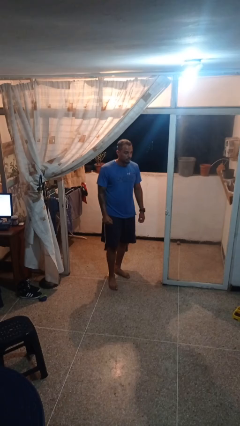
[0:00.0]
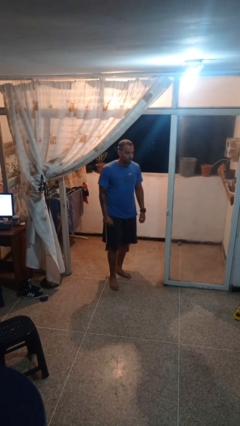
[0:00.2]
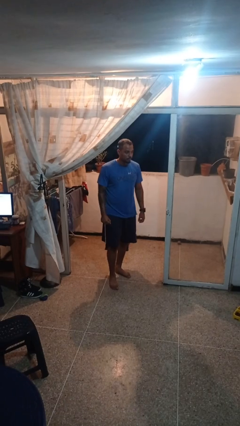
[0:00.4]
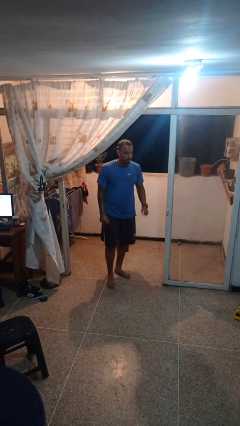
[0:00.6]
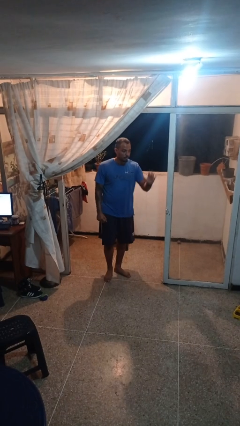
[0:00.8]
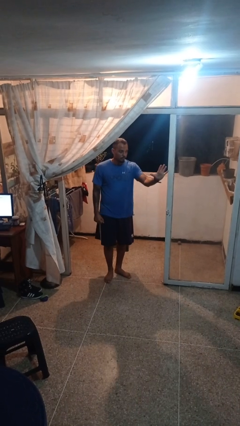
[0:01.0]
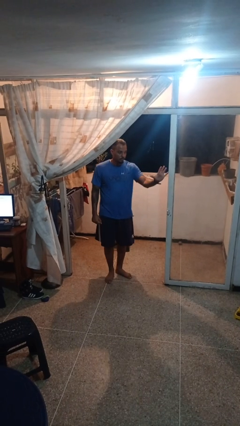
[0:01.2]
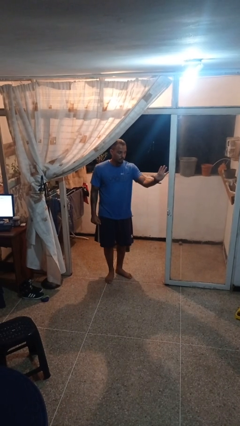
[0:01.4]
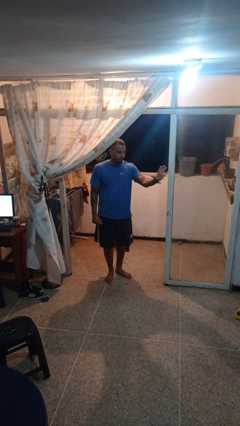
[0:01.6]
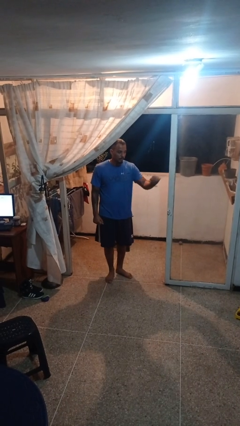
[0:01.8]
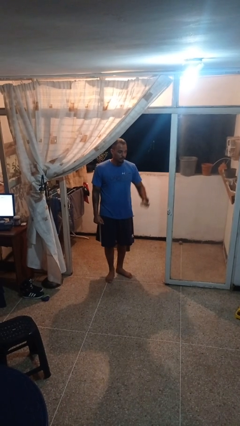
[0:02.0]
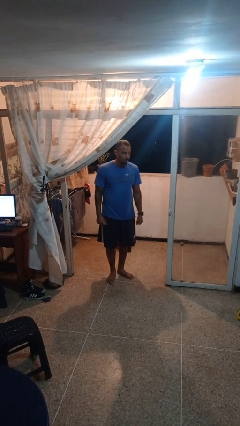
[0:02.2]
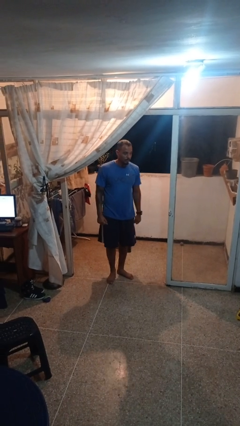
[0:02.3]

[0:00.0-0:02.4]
person gestures number five

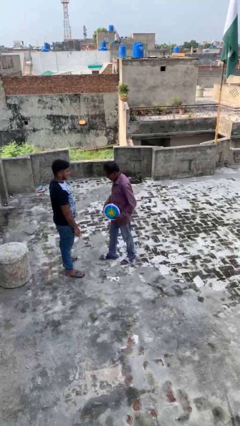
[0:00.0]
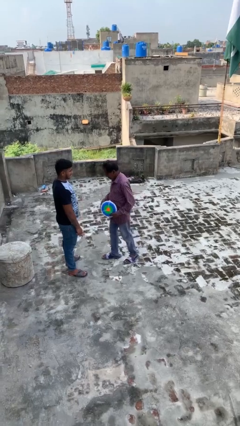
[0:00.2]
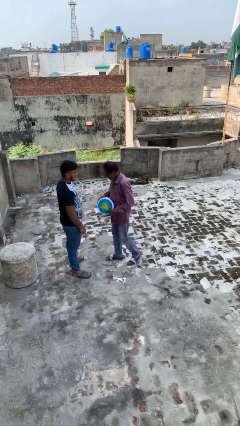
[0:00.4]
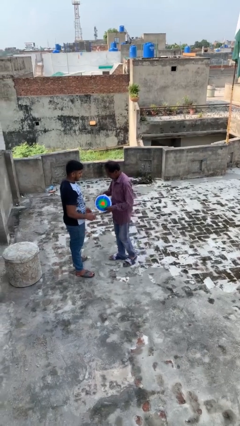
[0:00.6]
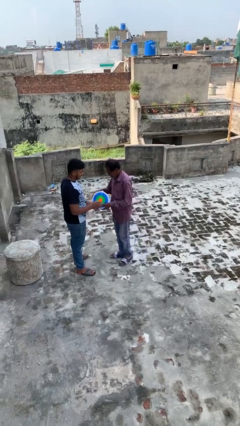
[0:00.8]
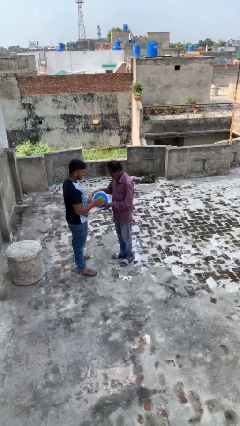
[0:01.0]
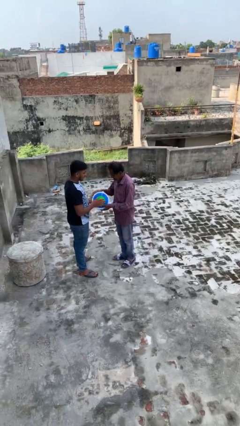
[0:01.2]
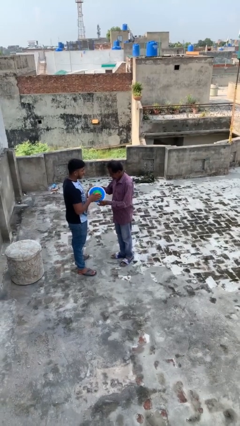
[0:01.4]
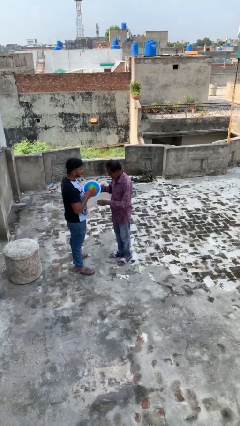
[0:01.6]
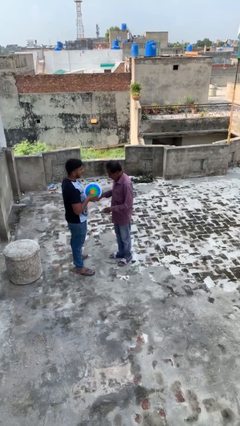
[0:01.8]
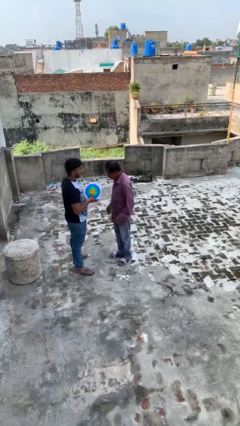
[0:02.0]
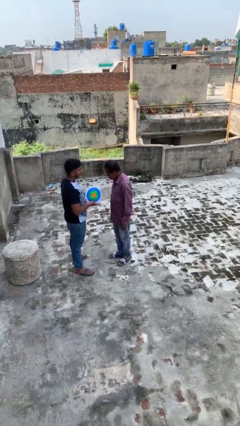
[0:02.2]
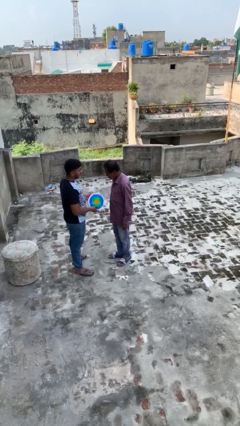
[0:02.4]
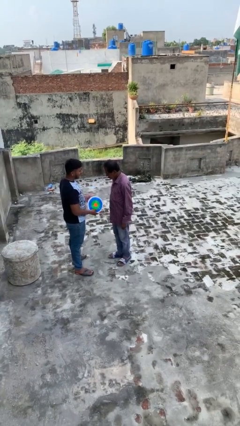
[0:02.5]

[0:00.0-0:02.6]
person transfers object to person

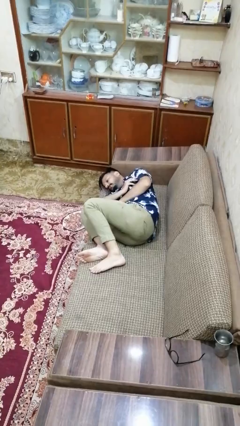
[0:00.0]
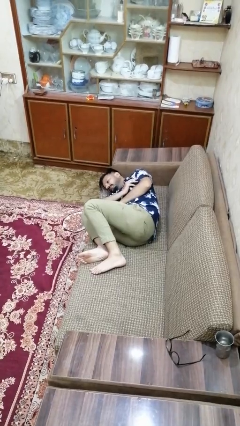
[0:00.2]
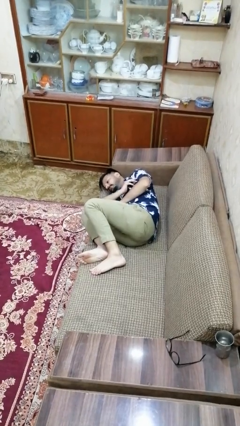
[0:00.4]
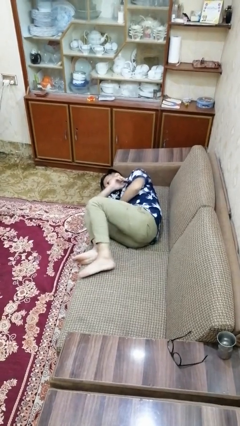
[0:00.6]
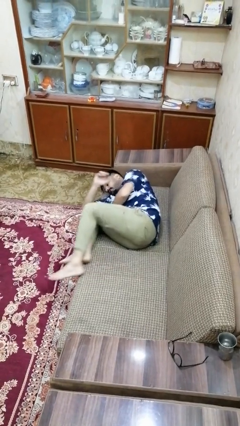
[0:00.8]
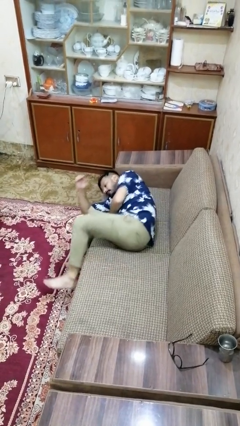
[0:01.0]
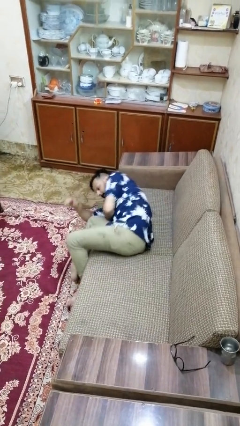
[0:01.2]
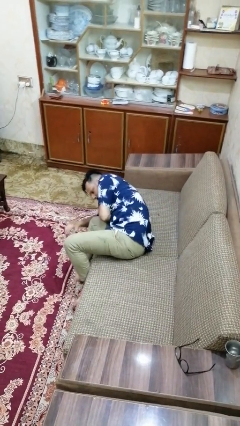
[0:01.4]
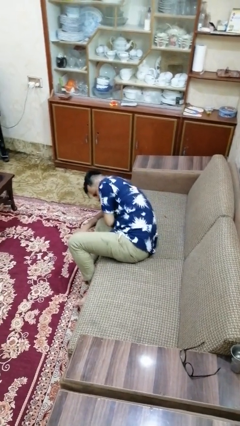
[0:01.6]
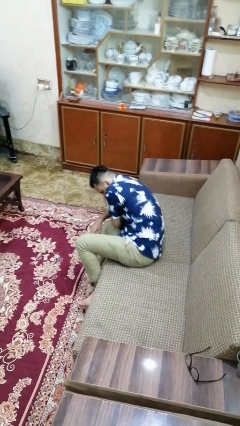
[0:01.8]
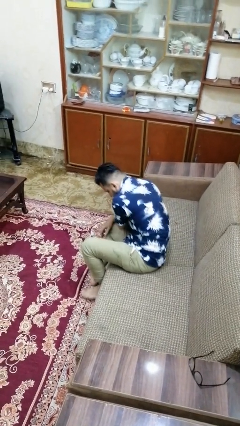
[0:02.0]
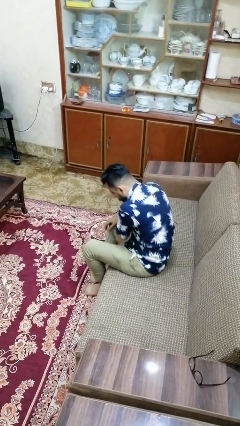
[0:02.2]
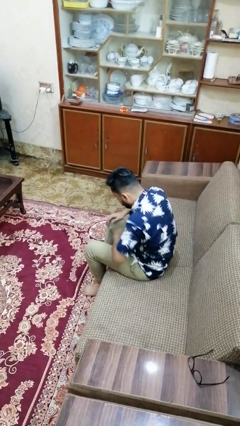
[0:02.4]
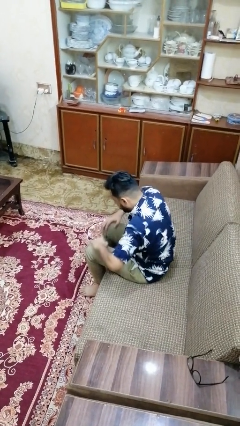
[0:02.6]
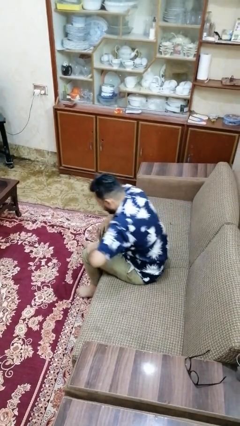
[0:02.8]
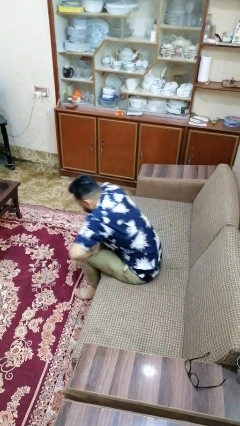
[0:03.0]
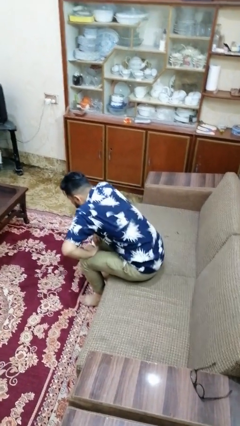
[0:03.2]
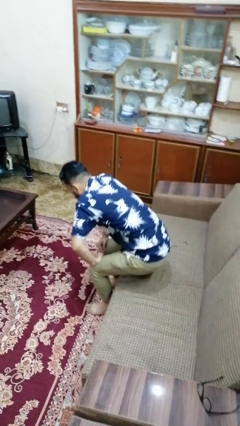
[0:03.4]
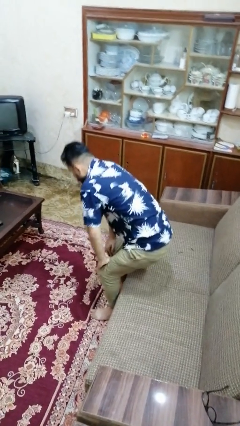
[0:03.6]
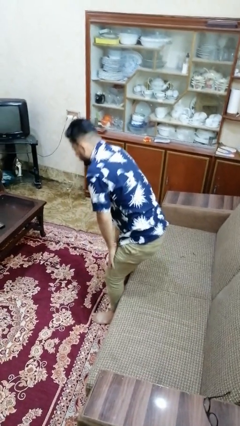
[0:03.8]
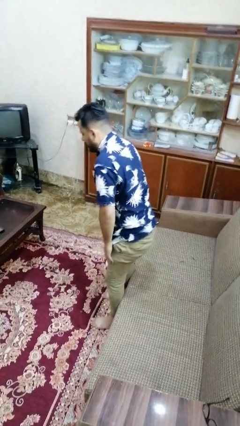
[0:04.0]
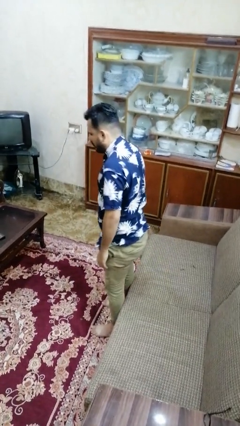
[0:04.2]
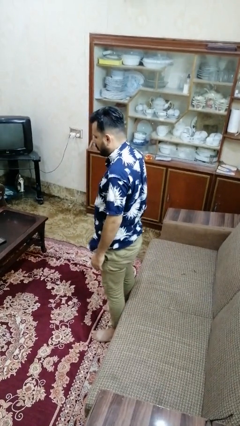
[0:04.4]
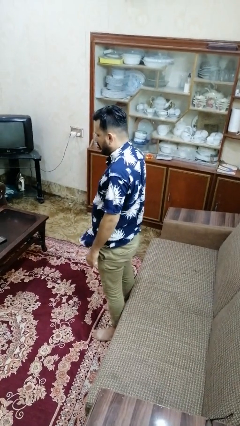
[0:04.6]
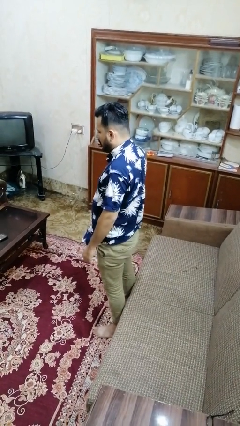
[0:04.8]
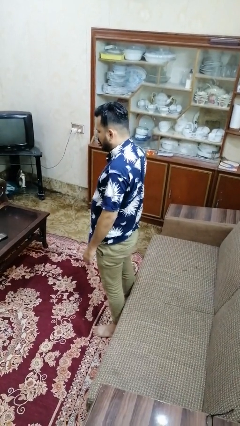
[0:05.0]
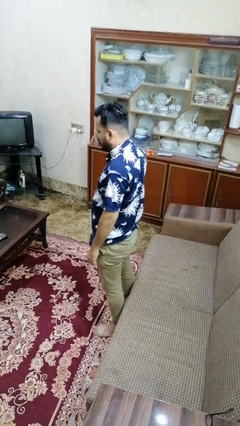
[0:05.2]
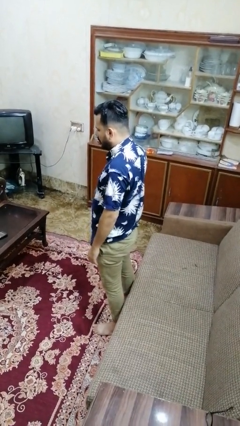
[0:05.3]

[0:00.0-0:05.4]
person stands up

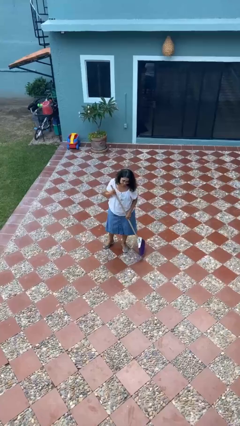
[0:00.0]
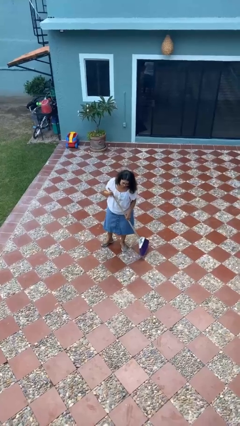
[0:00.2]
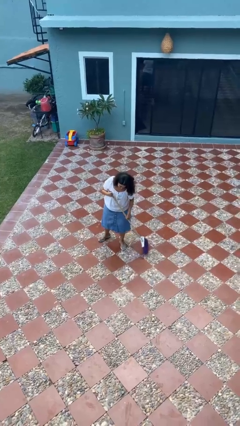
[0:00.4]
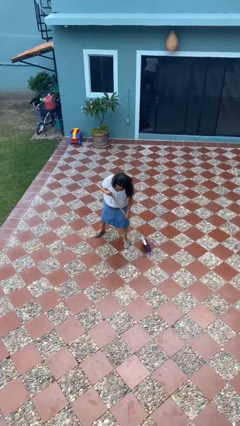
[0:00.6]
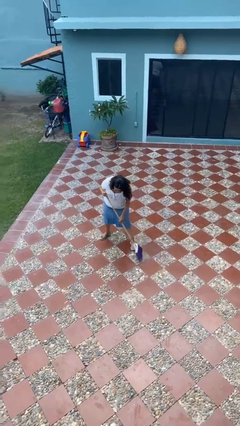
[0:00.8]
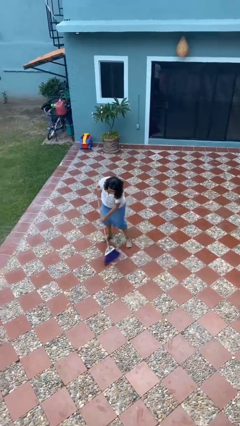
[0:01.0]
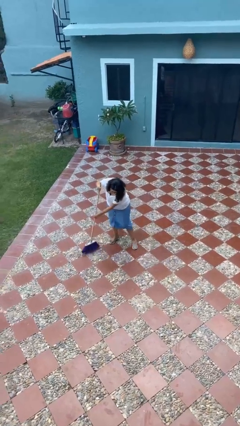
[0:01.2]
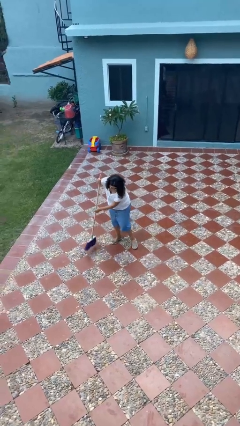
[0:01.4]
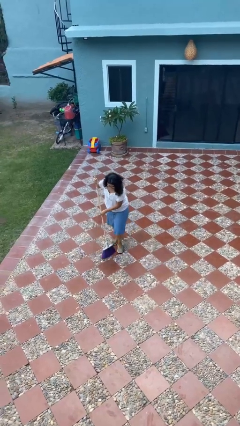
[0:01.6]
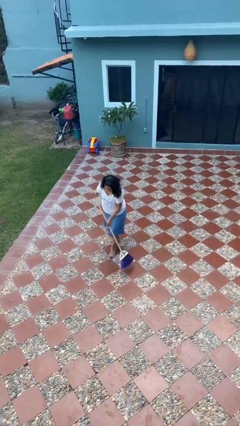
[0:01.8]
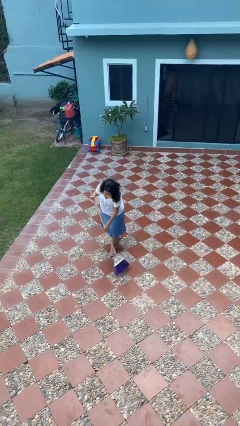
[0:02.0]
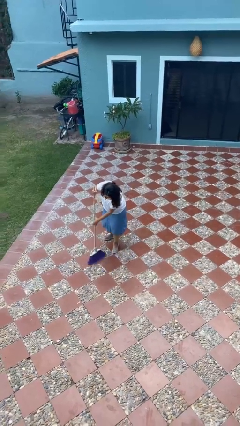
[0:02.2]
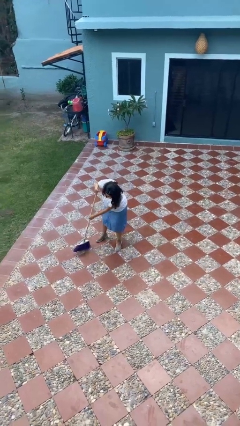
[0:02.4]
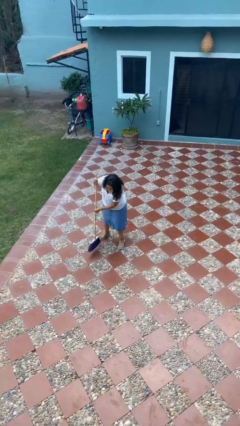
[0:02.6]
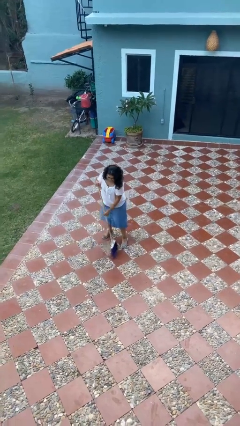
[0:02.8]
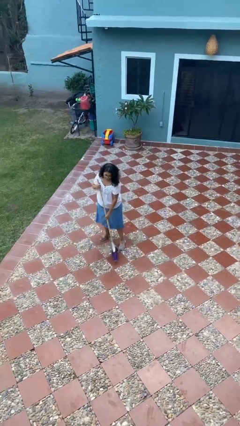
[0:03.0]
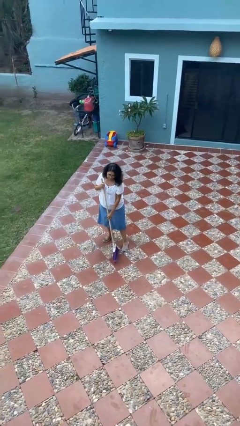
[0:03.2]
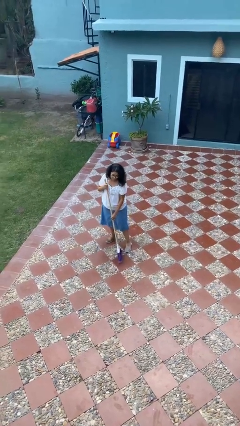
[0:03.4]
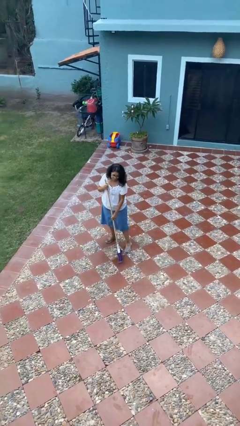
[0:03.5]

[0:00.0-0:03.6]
person sweeps floor

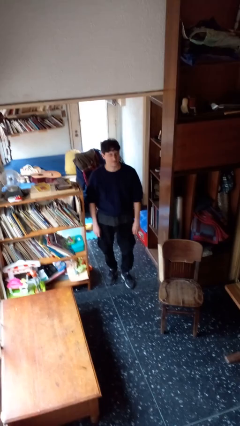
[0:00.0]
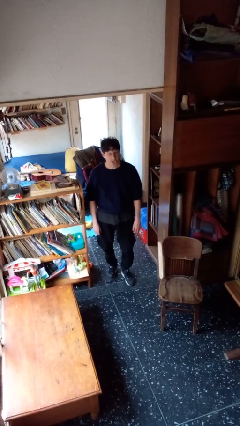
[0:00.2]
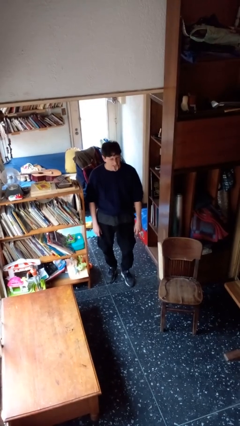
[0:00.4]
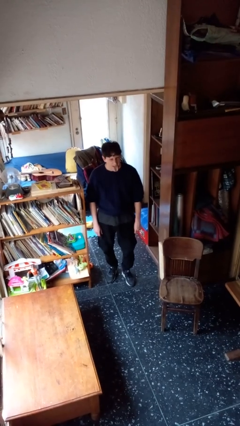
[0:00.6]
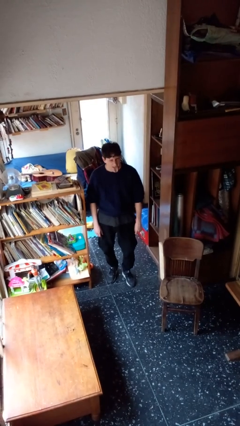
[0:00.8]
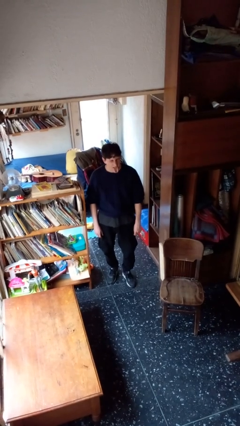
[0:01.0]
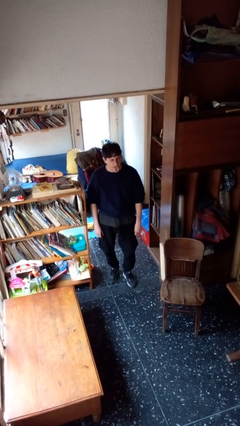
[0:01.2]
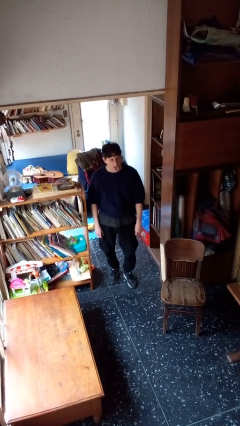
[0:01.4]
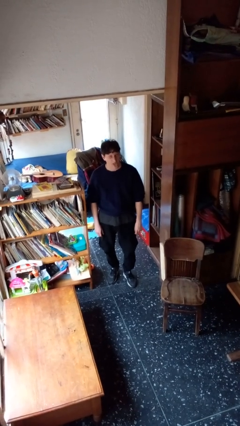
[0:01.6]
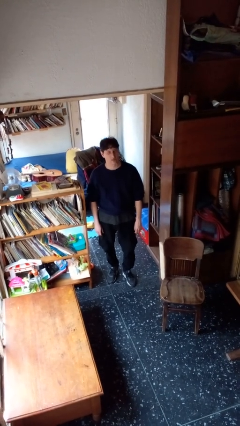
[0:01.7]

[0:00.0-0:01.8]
person sticks out tongue

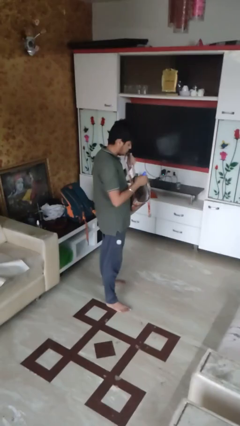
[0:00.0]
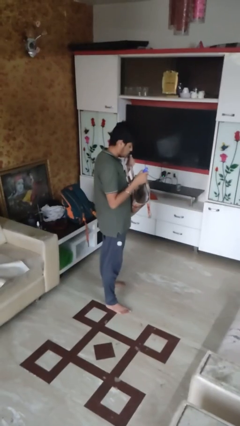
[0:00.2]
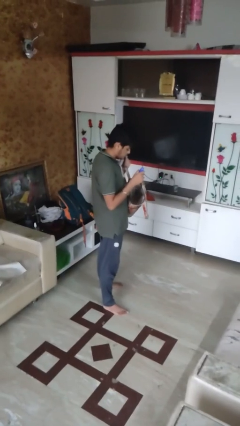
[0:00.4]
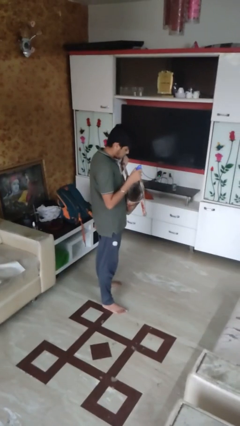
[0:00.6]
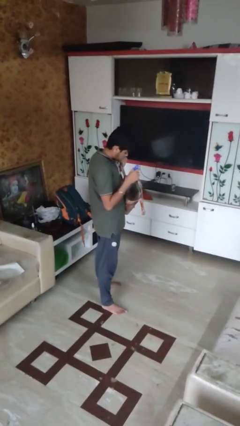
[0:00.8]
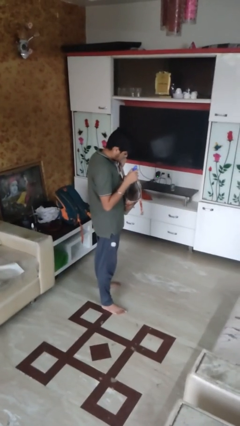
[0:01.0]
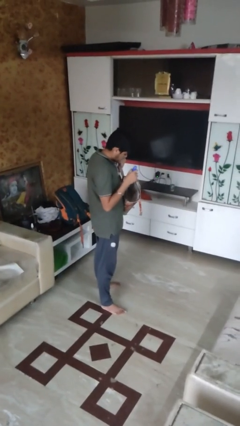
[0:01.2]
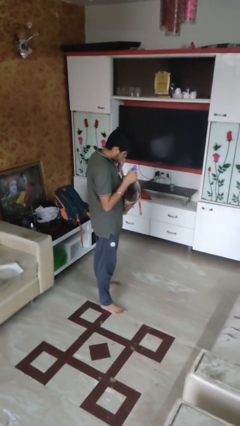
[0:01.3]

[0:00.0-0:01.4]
person takes object from purse

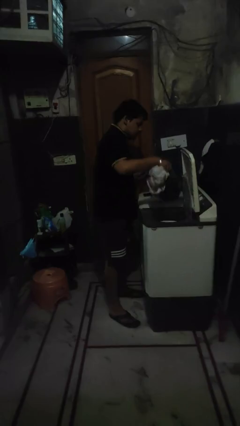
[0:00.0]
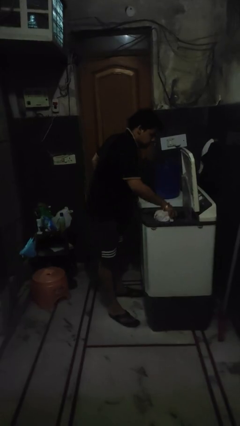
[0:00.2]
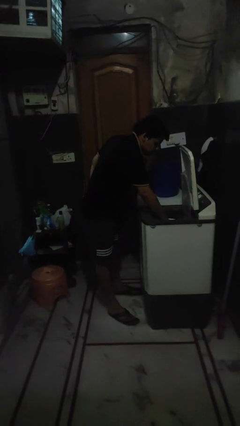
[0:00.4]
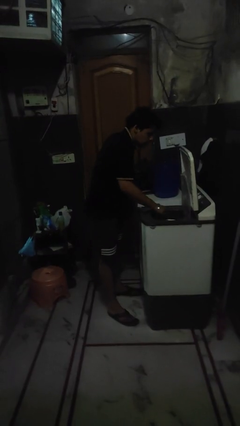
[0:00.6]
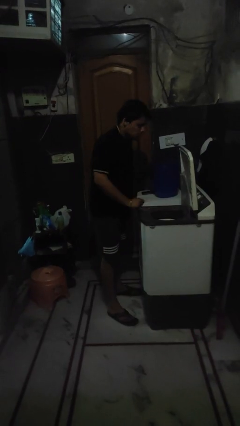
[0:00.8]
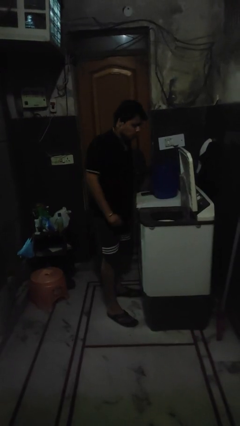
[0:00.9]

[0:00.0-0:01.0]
person loads clotheswasher
